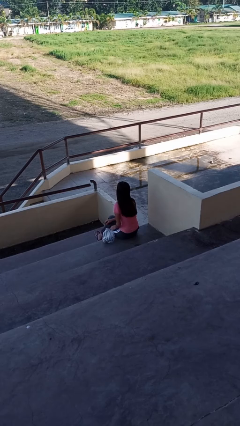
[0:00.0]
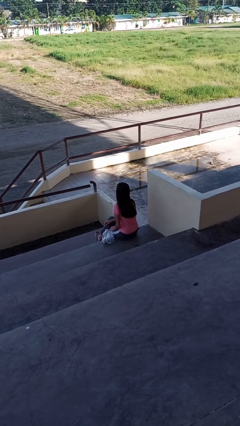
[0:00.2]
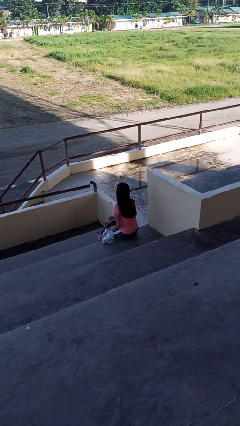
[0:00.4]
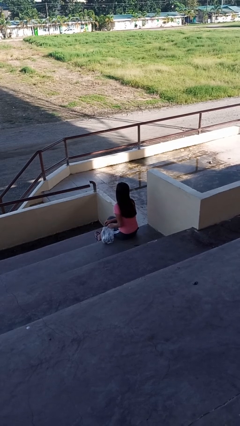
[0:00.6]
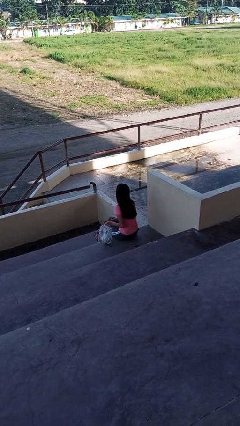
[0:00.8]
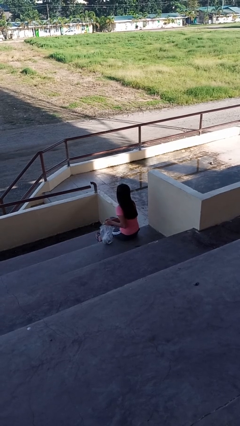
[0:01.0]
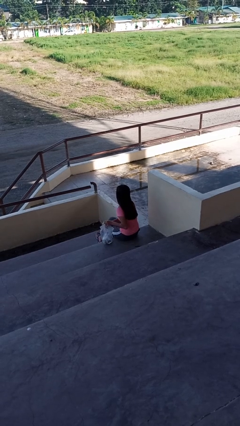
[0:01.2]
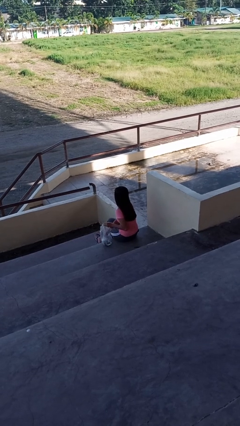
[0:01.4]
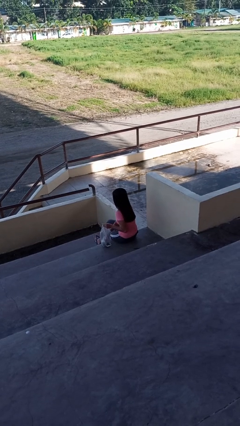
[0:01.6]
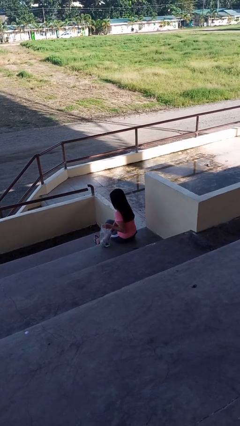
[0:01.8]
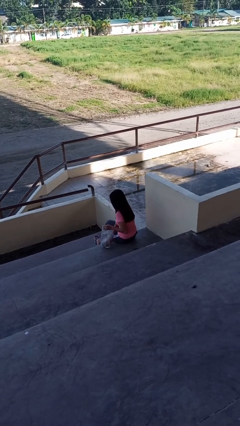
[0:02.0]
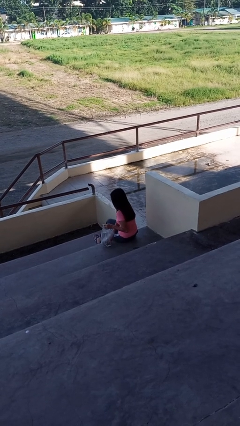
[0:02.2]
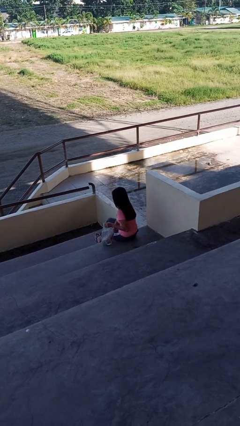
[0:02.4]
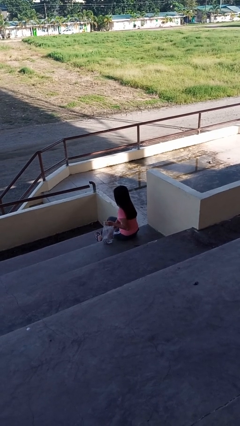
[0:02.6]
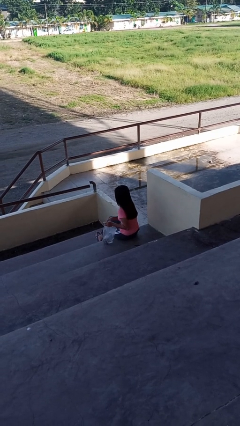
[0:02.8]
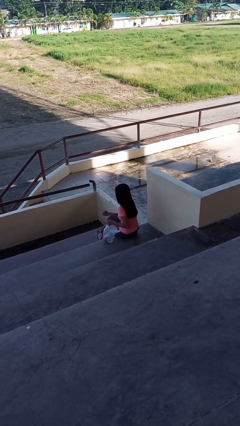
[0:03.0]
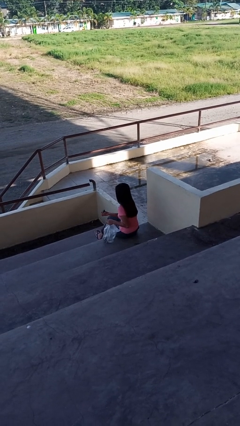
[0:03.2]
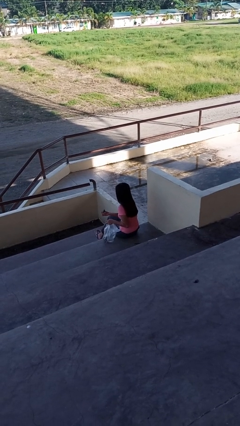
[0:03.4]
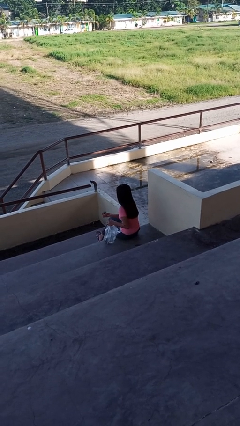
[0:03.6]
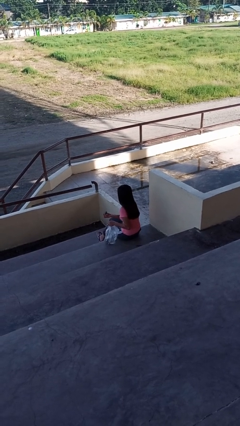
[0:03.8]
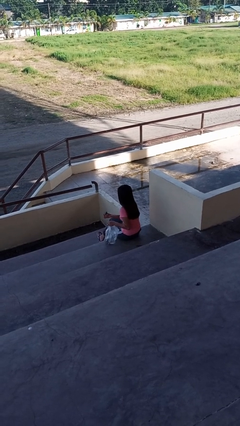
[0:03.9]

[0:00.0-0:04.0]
person takes object from bag

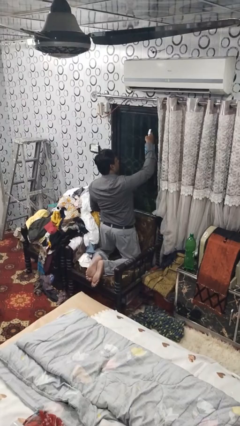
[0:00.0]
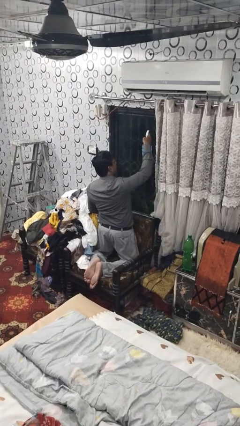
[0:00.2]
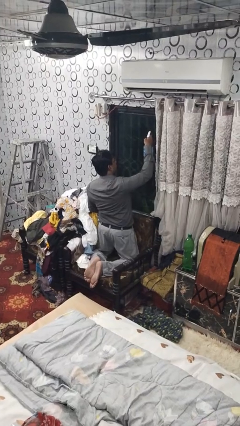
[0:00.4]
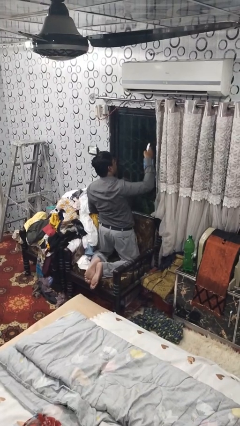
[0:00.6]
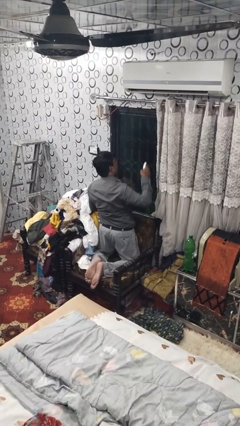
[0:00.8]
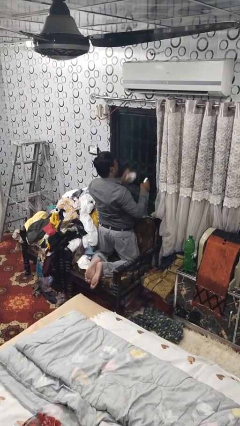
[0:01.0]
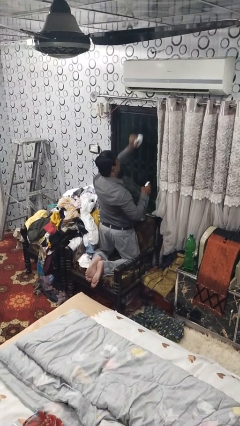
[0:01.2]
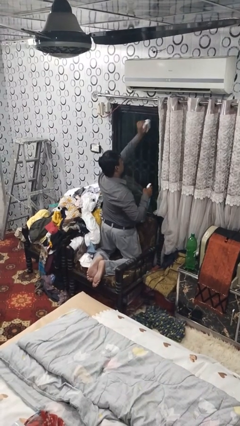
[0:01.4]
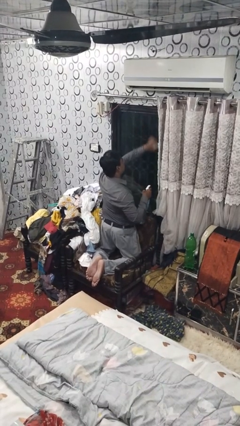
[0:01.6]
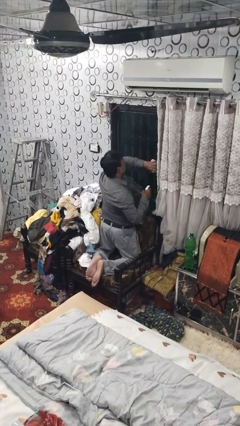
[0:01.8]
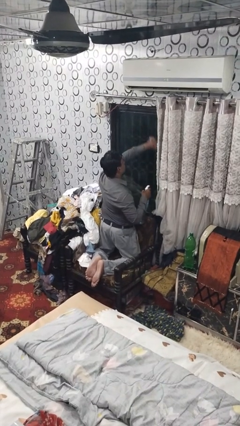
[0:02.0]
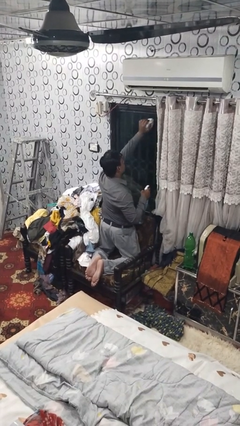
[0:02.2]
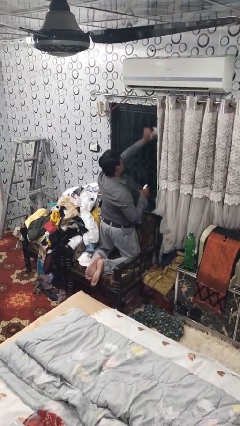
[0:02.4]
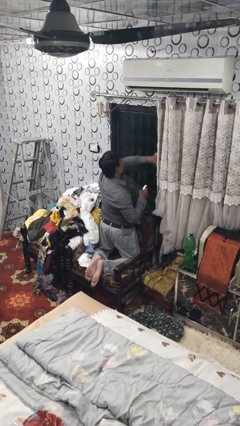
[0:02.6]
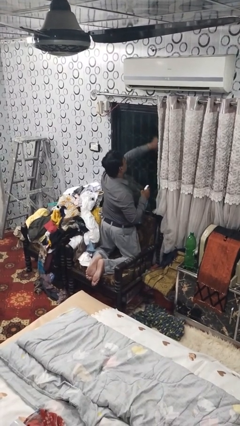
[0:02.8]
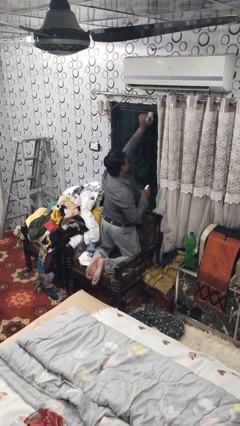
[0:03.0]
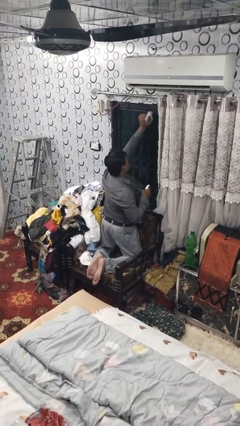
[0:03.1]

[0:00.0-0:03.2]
person washes window

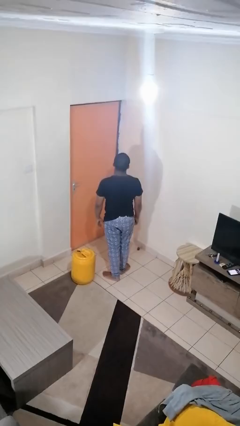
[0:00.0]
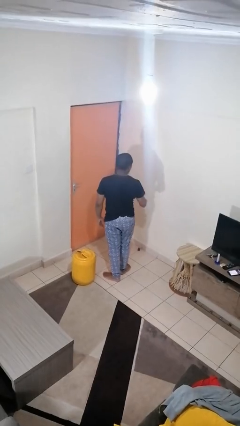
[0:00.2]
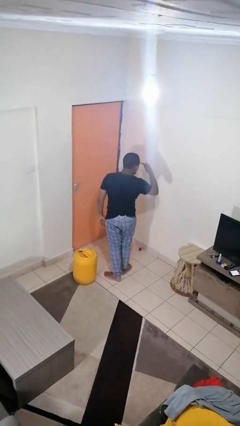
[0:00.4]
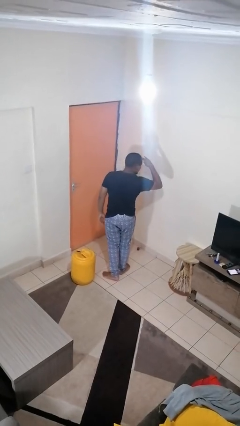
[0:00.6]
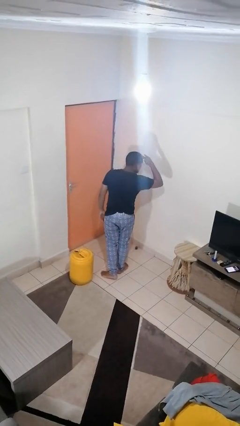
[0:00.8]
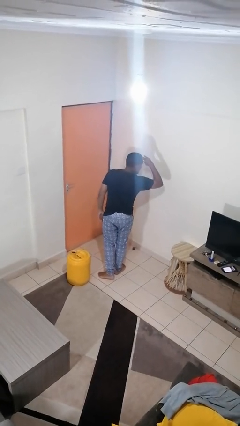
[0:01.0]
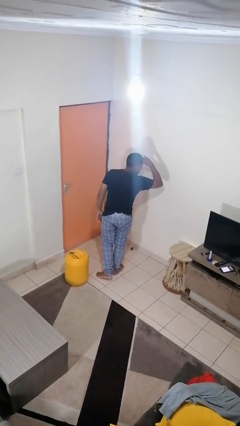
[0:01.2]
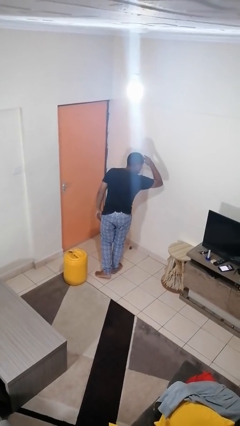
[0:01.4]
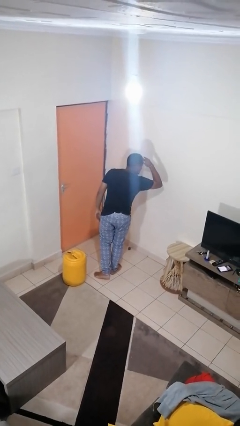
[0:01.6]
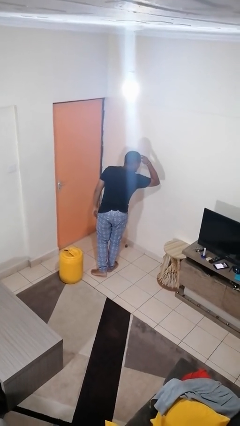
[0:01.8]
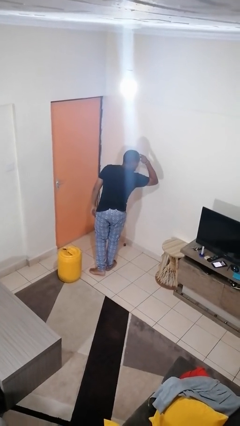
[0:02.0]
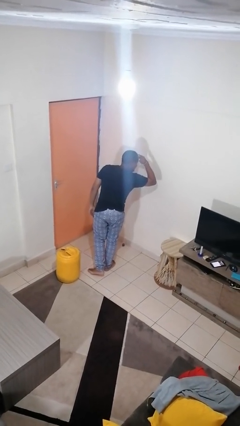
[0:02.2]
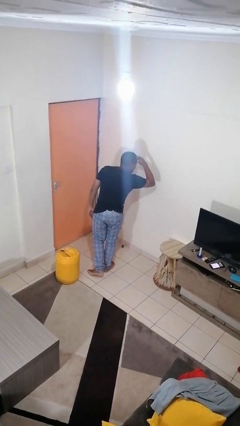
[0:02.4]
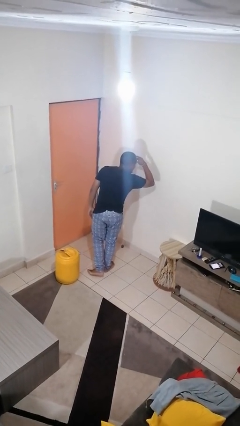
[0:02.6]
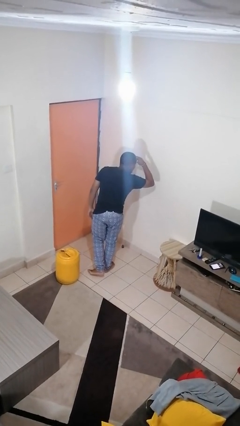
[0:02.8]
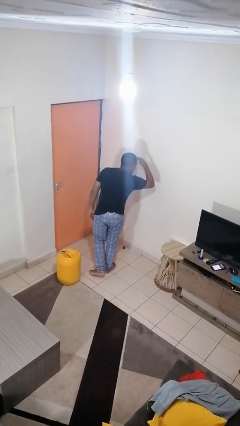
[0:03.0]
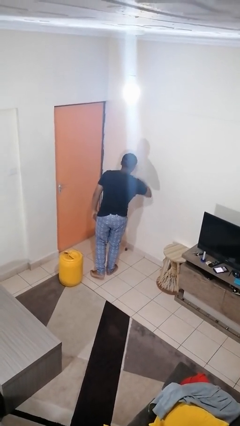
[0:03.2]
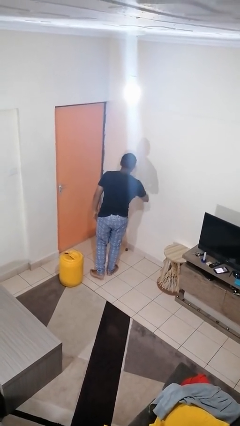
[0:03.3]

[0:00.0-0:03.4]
person shades eyes

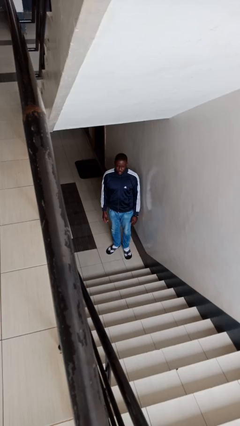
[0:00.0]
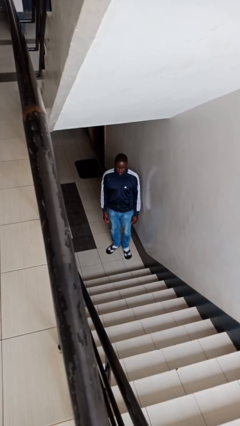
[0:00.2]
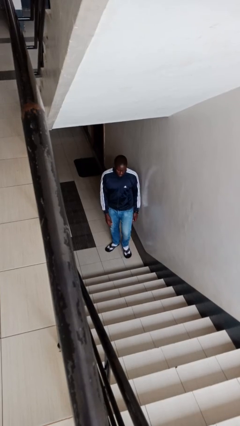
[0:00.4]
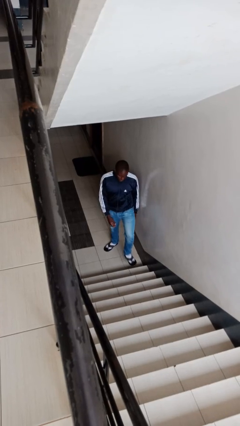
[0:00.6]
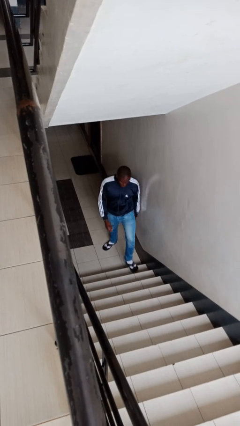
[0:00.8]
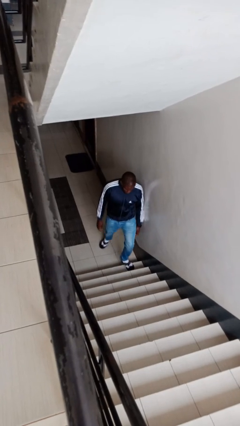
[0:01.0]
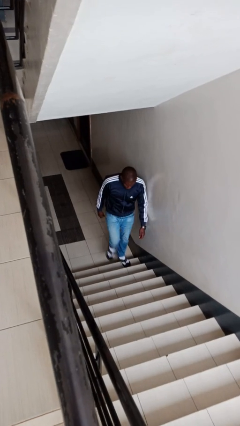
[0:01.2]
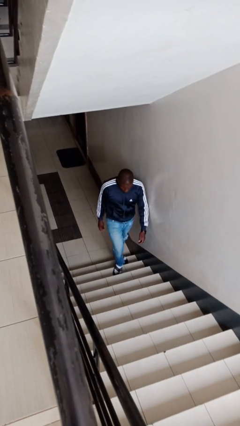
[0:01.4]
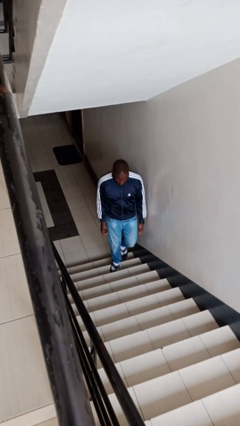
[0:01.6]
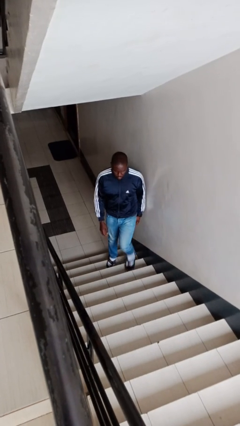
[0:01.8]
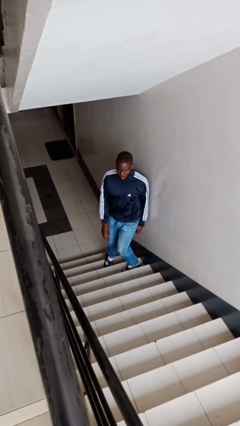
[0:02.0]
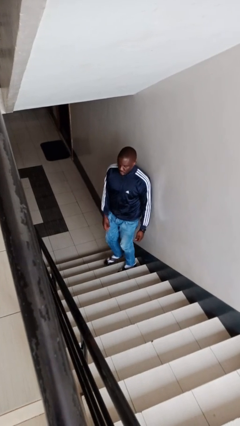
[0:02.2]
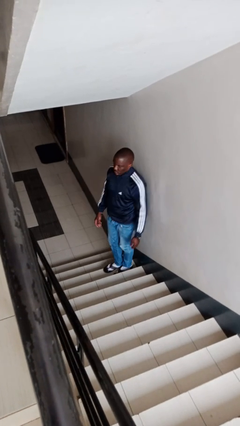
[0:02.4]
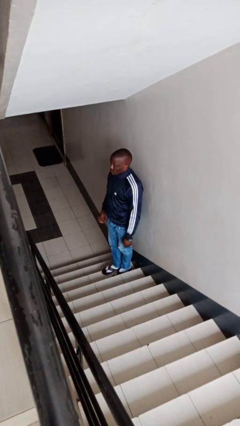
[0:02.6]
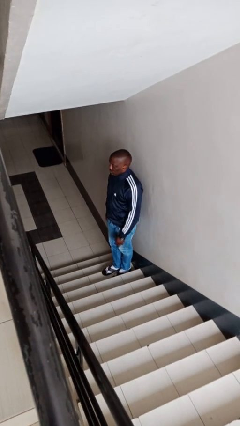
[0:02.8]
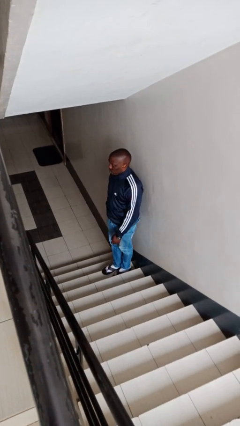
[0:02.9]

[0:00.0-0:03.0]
person climbs up stairs

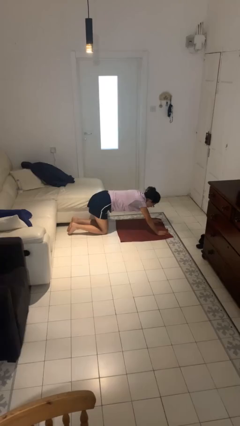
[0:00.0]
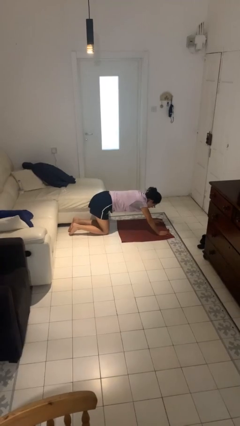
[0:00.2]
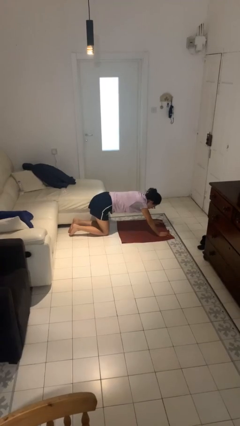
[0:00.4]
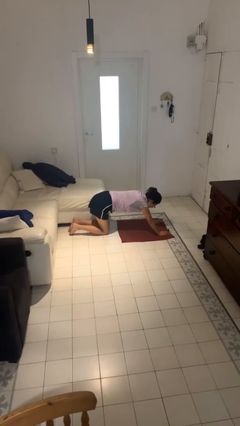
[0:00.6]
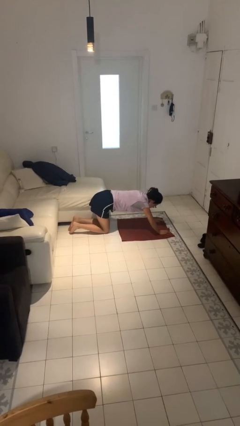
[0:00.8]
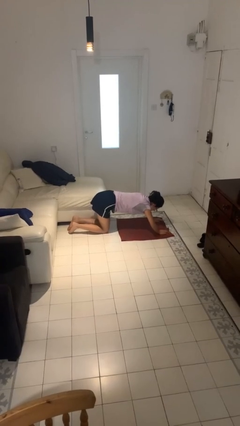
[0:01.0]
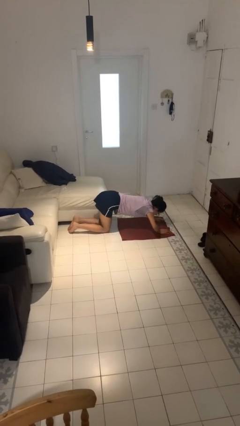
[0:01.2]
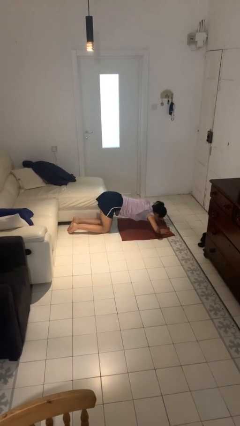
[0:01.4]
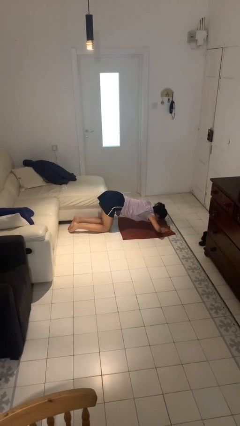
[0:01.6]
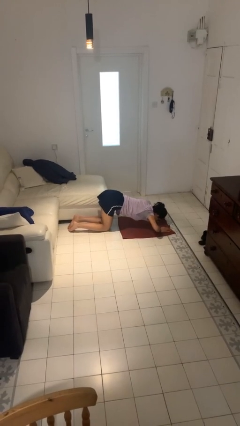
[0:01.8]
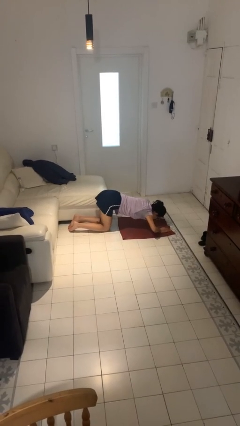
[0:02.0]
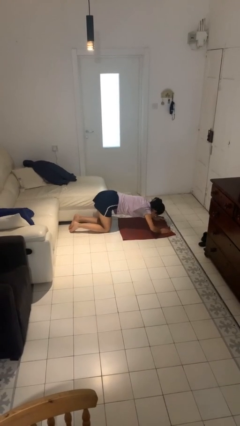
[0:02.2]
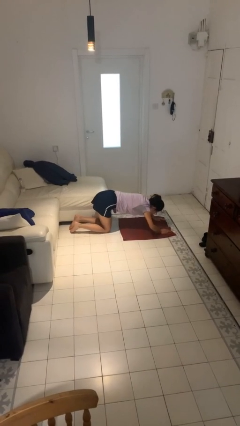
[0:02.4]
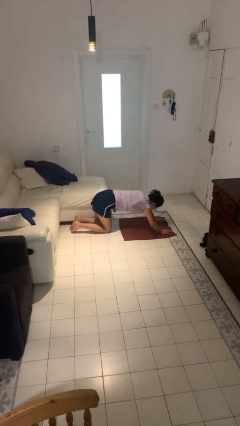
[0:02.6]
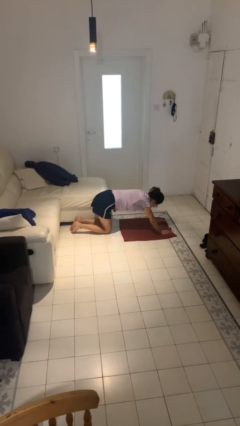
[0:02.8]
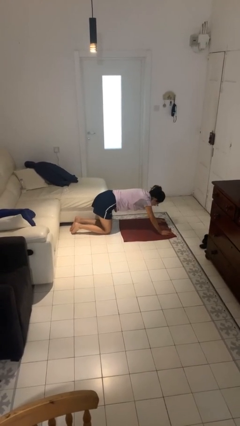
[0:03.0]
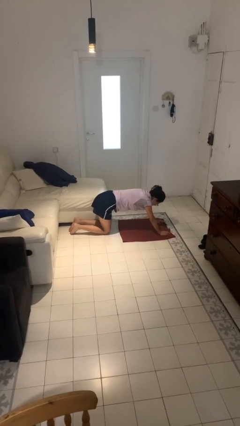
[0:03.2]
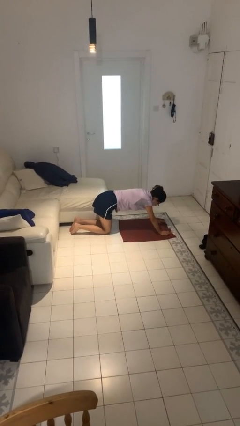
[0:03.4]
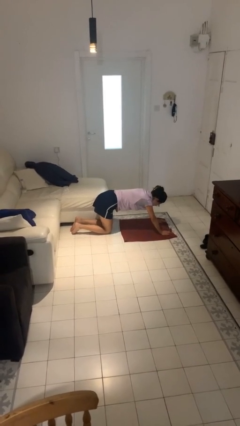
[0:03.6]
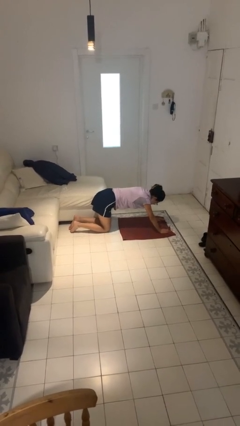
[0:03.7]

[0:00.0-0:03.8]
person exercises with pushup
